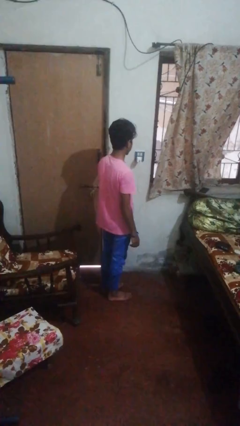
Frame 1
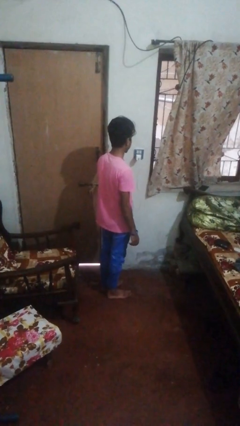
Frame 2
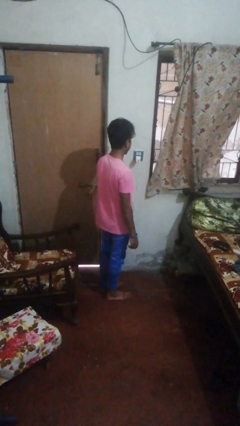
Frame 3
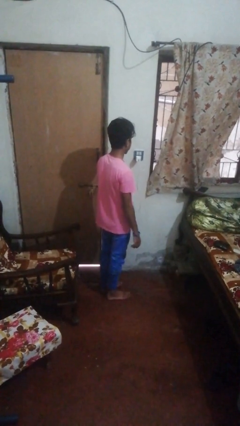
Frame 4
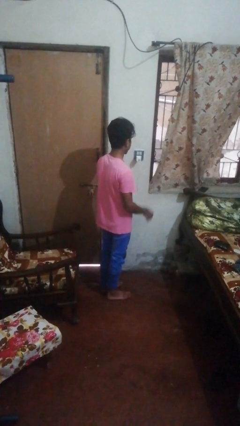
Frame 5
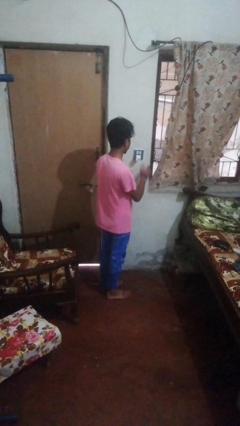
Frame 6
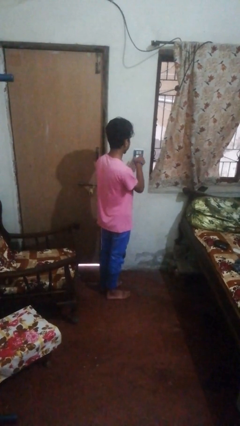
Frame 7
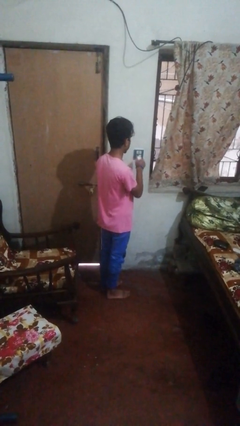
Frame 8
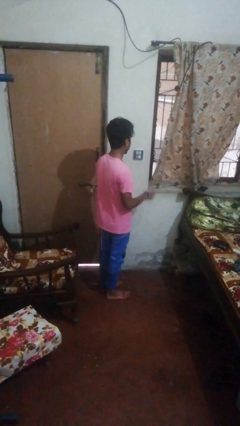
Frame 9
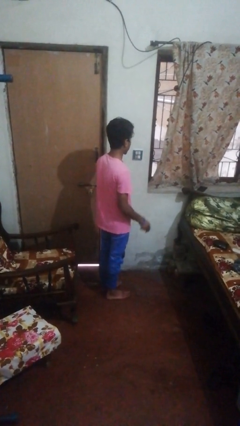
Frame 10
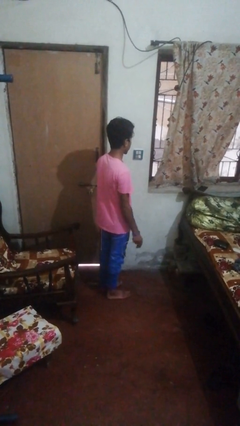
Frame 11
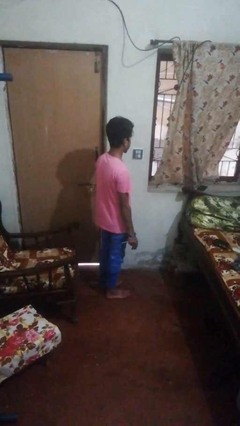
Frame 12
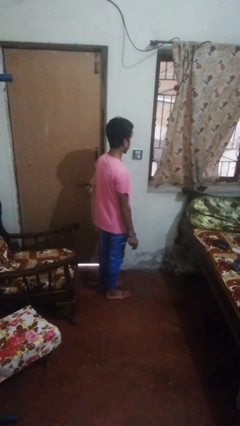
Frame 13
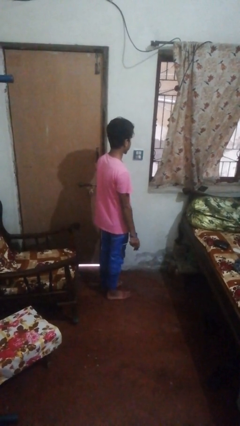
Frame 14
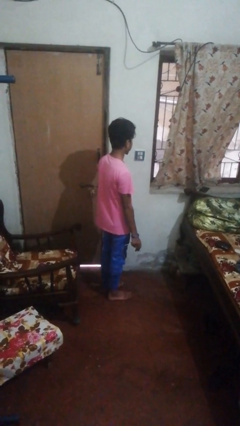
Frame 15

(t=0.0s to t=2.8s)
person unplugs from electrical socket

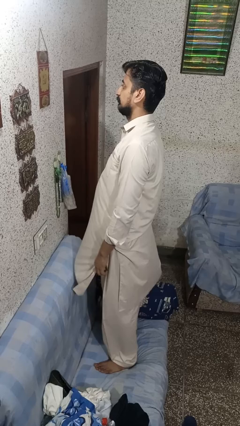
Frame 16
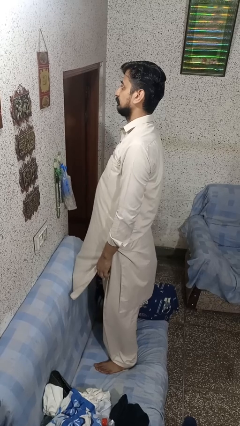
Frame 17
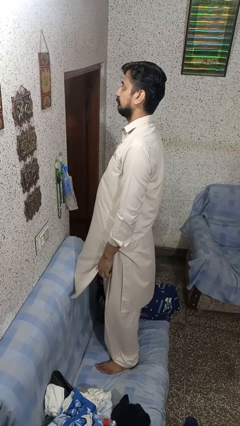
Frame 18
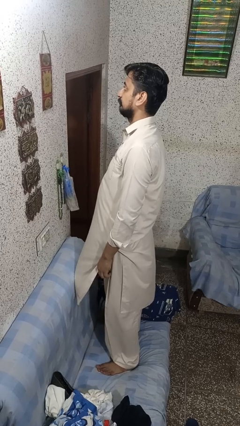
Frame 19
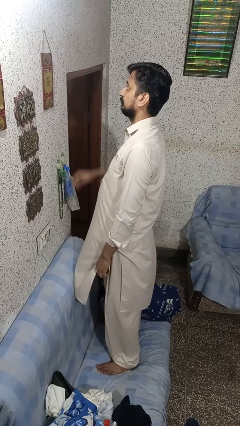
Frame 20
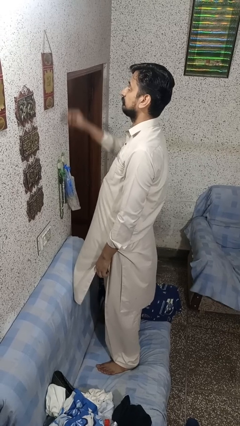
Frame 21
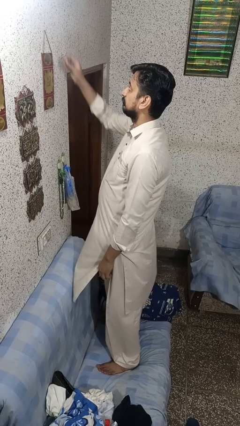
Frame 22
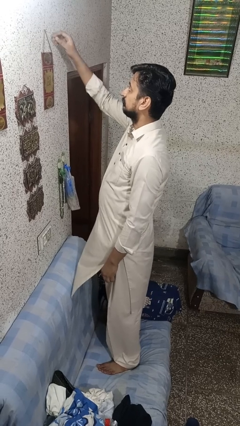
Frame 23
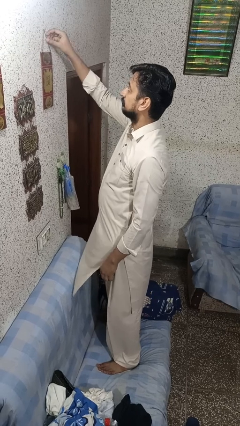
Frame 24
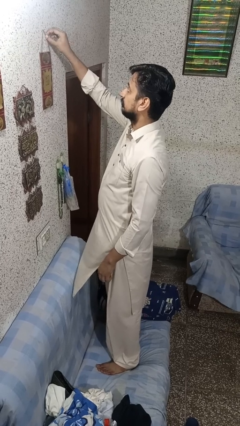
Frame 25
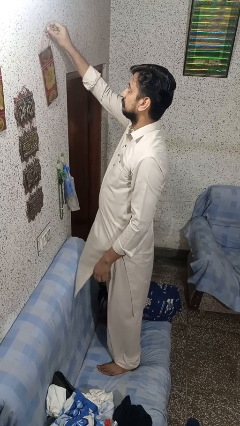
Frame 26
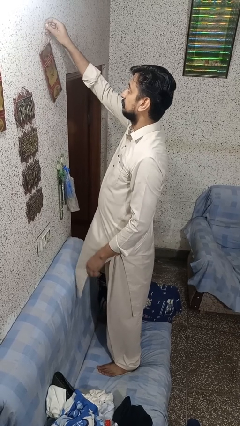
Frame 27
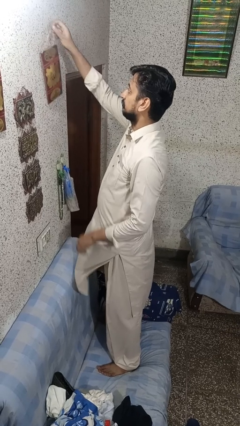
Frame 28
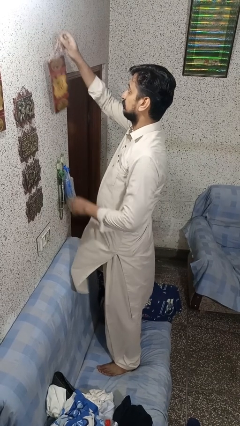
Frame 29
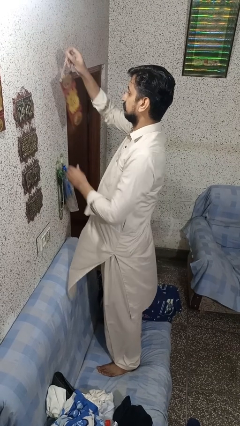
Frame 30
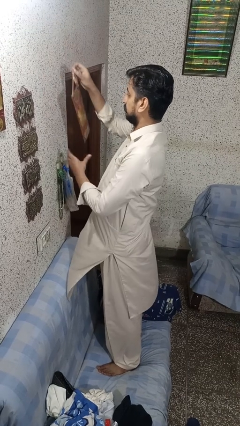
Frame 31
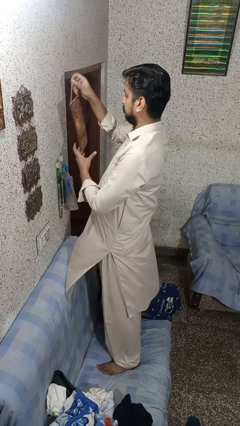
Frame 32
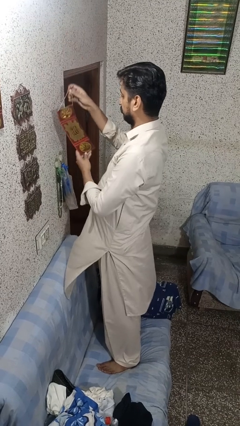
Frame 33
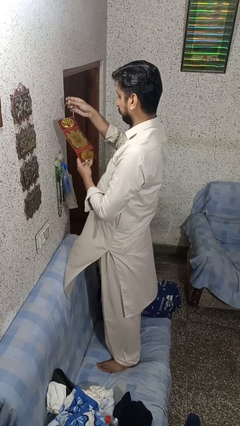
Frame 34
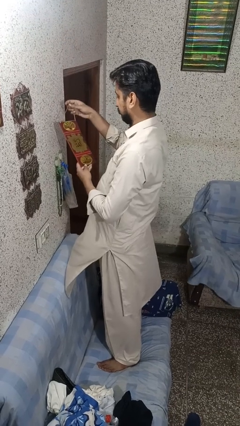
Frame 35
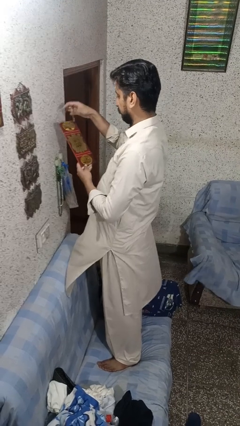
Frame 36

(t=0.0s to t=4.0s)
person takes down picture frame

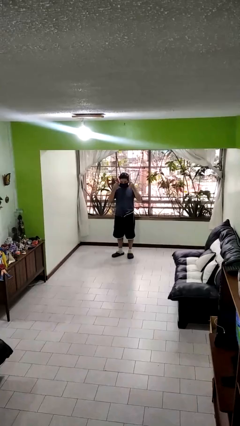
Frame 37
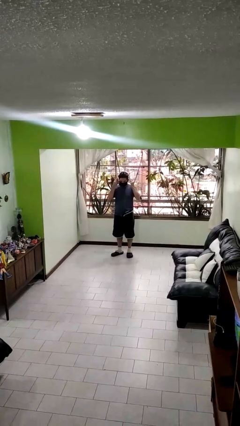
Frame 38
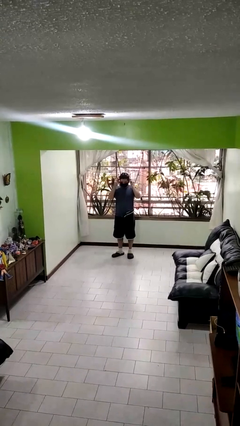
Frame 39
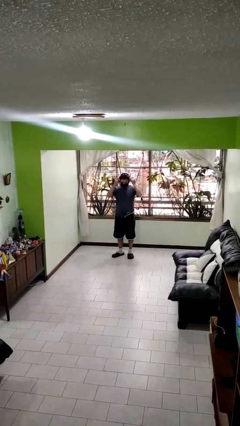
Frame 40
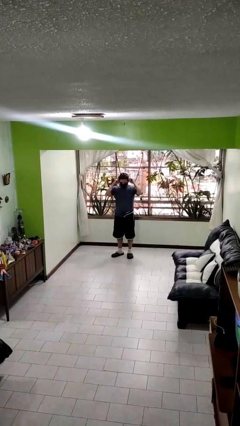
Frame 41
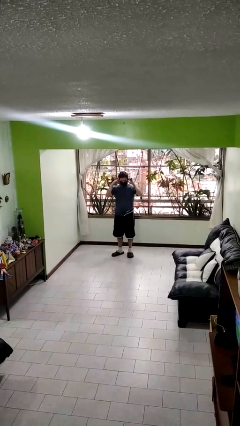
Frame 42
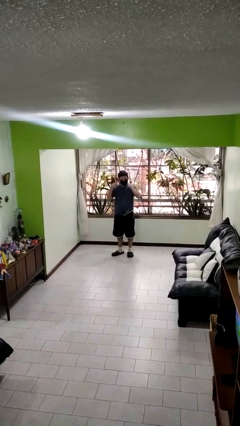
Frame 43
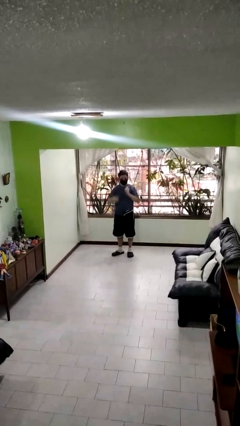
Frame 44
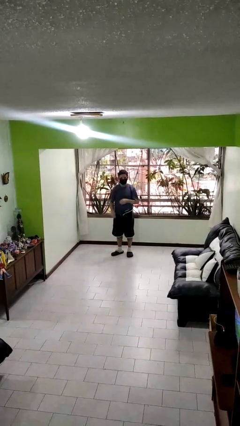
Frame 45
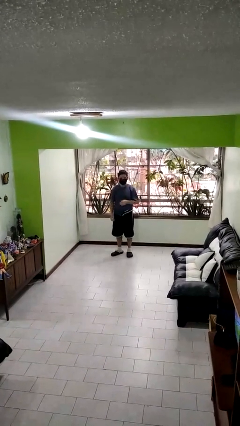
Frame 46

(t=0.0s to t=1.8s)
person puts on facemask

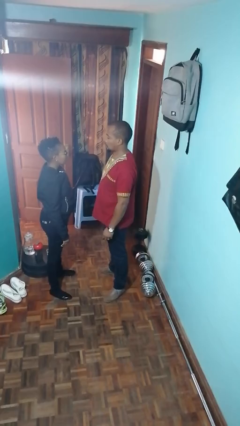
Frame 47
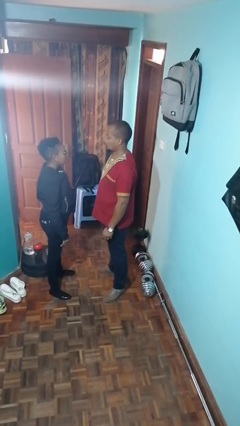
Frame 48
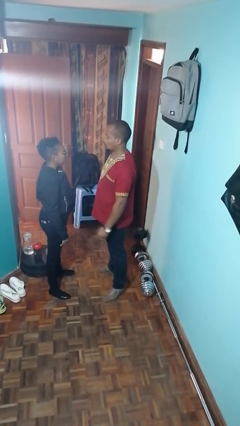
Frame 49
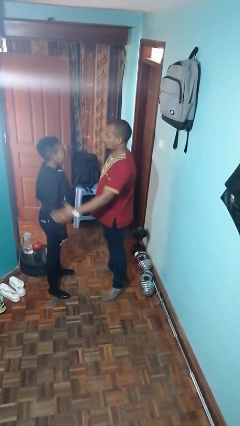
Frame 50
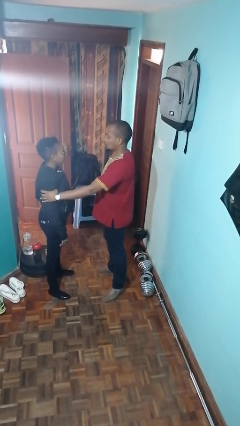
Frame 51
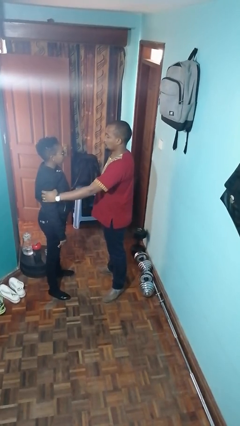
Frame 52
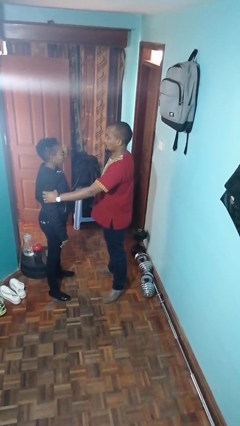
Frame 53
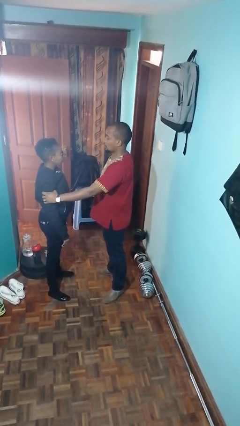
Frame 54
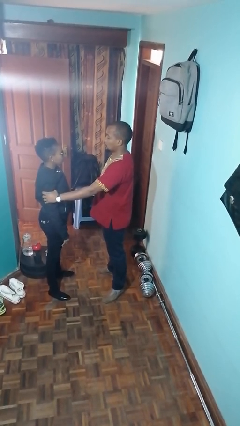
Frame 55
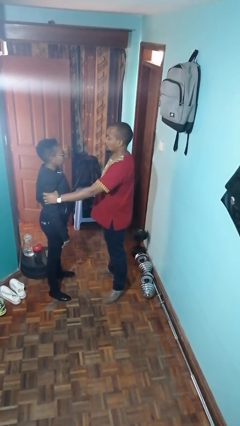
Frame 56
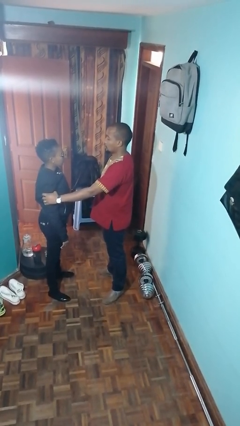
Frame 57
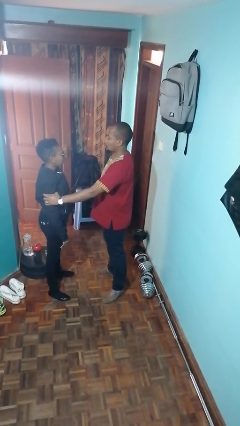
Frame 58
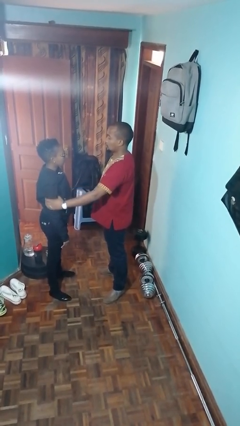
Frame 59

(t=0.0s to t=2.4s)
person grabs person by bicep

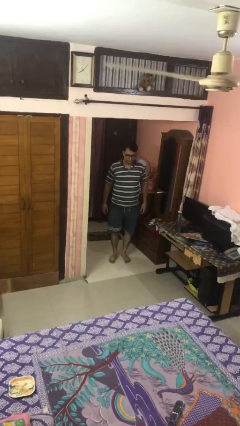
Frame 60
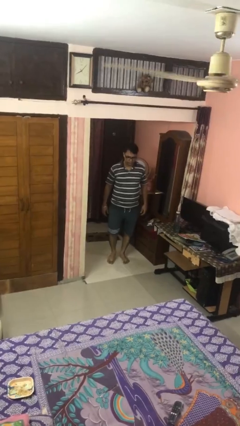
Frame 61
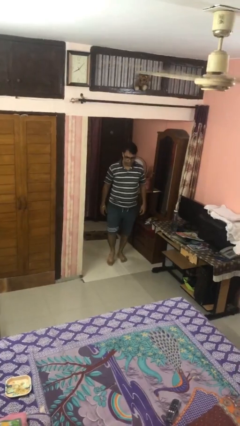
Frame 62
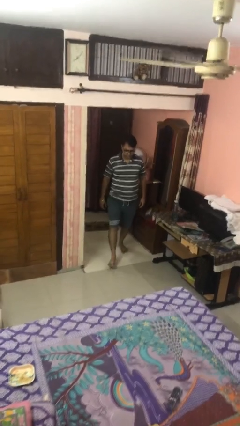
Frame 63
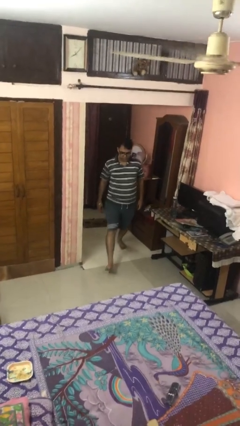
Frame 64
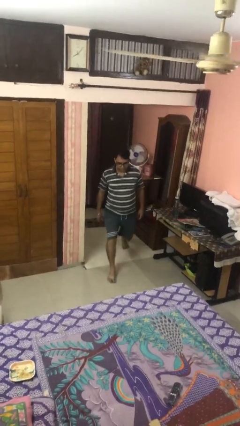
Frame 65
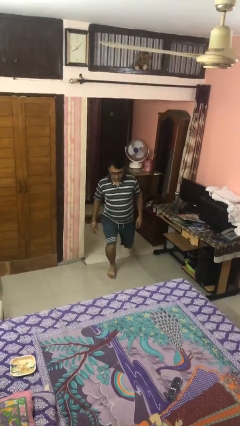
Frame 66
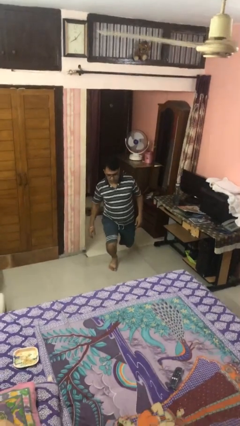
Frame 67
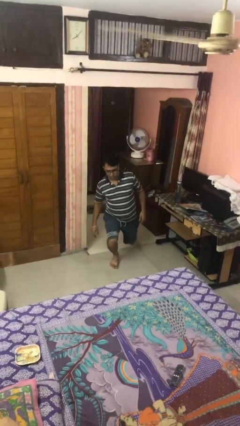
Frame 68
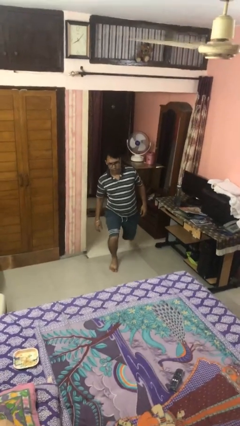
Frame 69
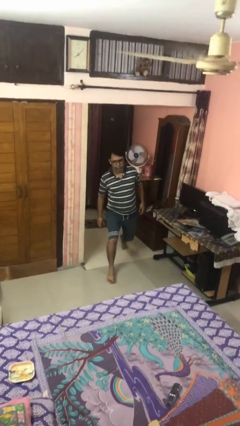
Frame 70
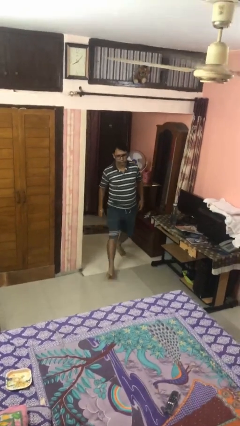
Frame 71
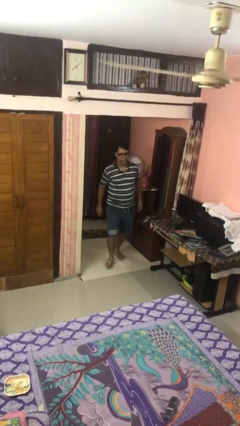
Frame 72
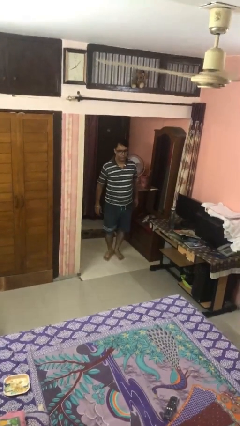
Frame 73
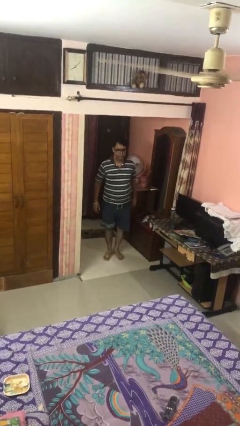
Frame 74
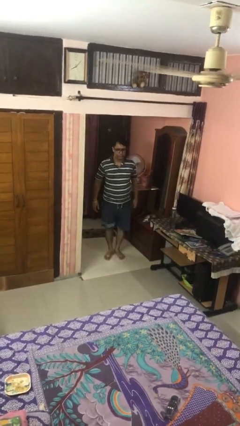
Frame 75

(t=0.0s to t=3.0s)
person exercises with lunges

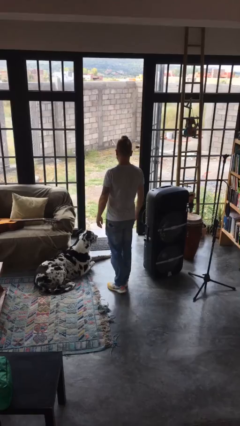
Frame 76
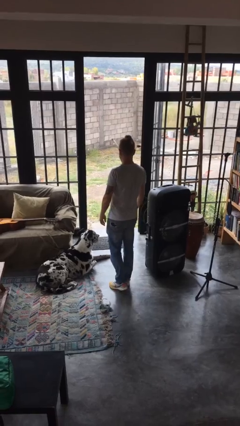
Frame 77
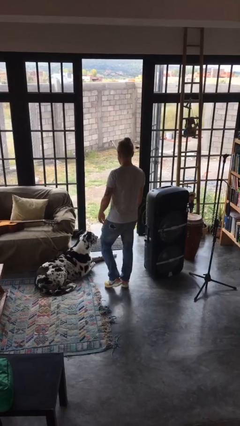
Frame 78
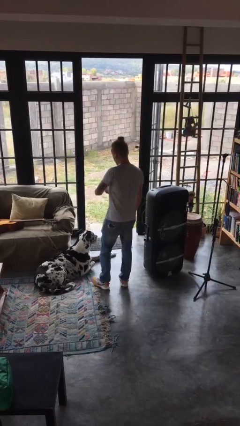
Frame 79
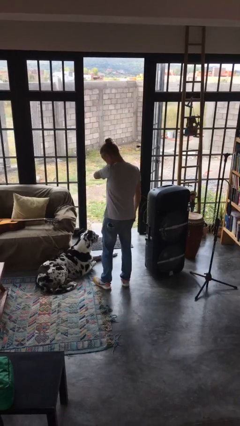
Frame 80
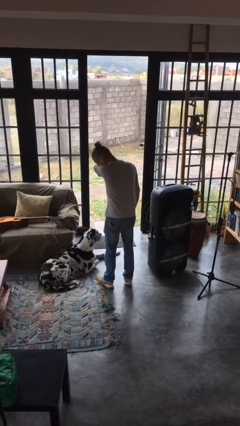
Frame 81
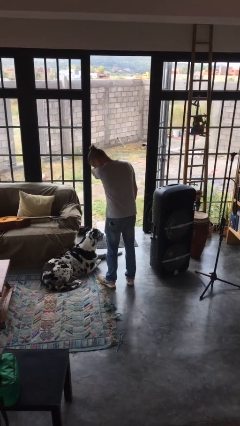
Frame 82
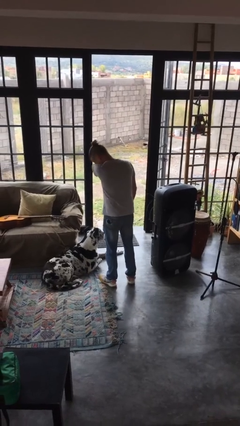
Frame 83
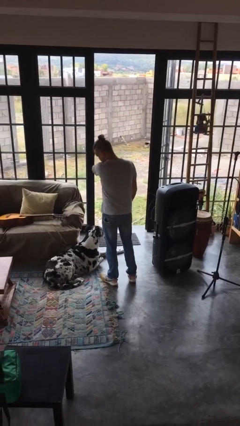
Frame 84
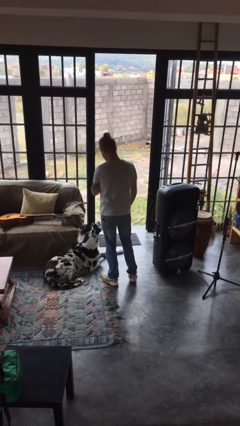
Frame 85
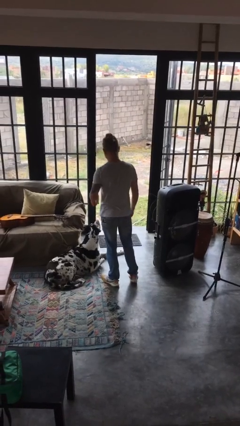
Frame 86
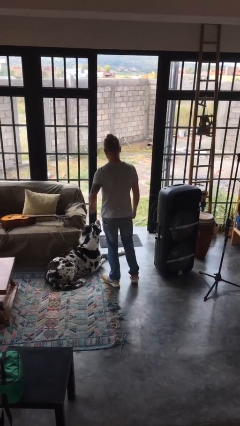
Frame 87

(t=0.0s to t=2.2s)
person sneezes into arm

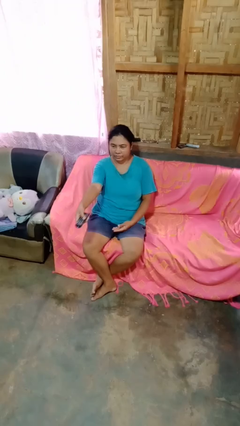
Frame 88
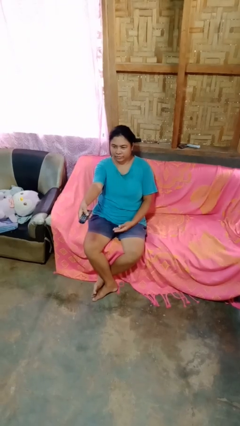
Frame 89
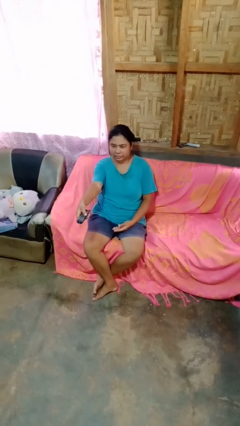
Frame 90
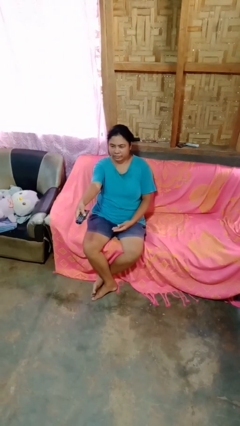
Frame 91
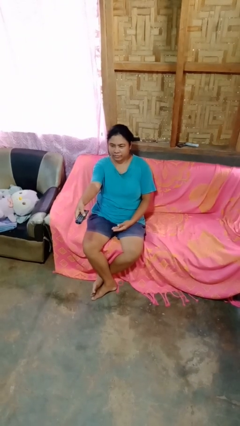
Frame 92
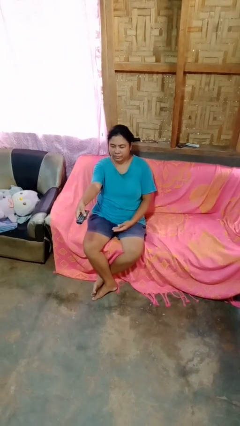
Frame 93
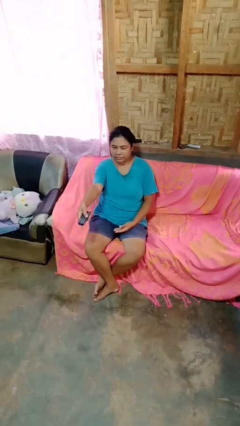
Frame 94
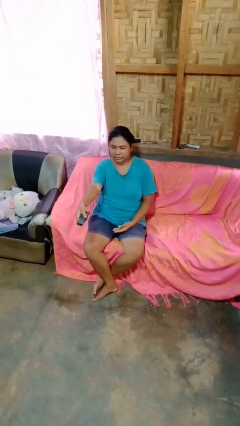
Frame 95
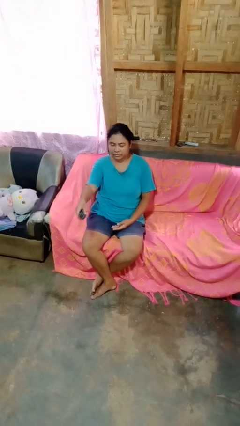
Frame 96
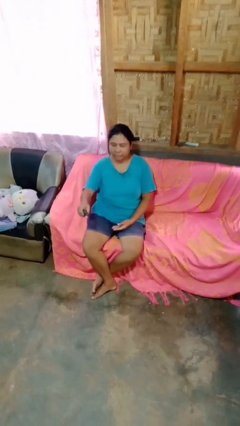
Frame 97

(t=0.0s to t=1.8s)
person uses television remote
